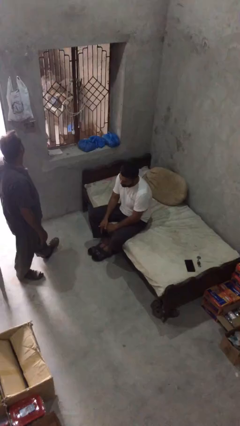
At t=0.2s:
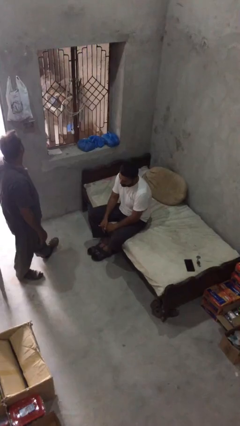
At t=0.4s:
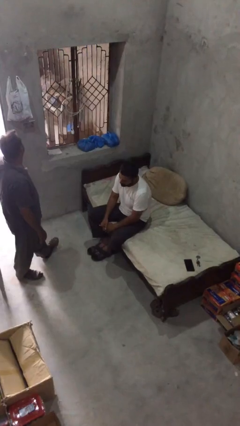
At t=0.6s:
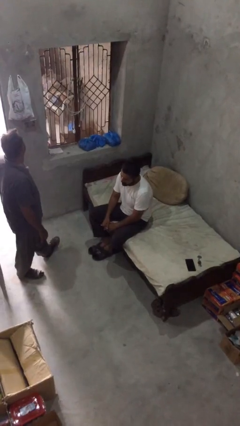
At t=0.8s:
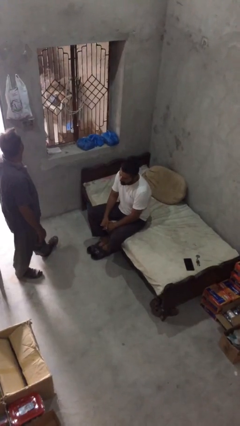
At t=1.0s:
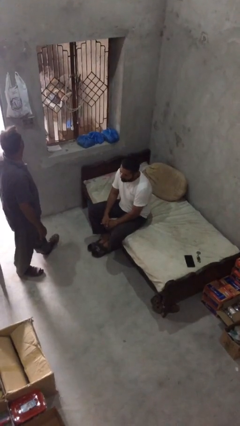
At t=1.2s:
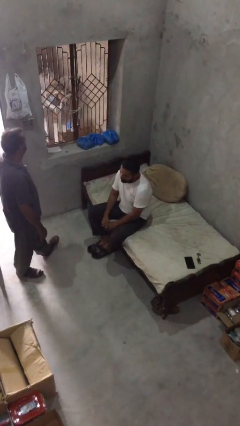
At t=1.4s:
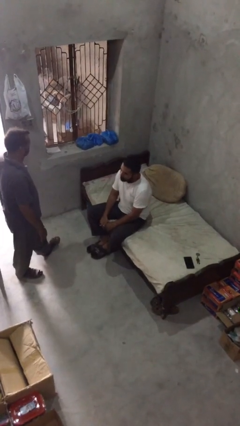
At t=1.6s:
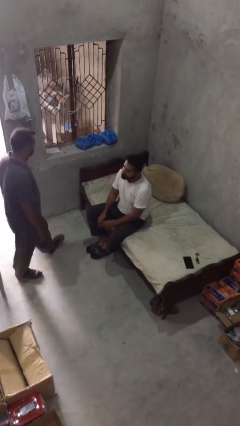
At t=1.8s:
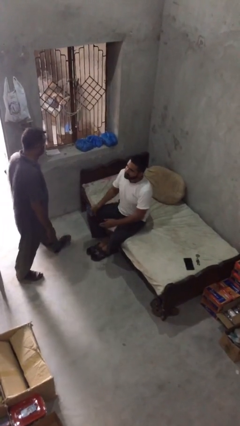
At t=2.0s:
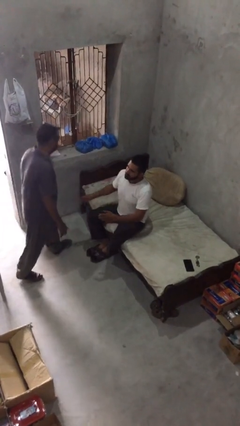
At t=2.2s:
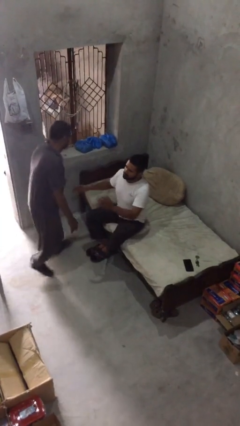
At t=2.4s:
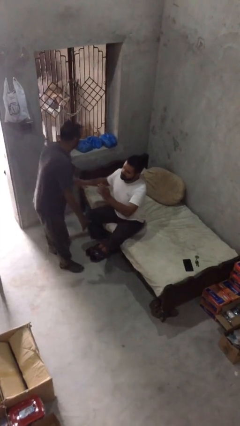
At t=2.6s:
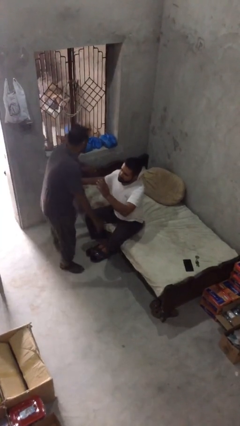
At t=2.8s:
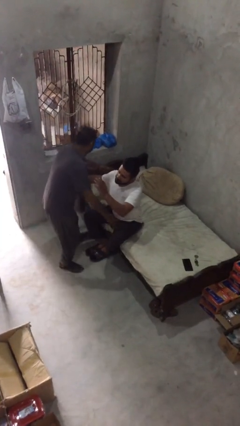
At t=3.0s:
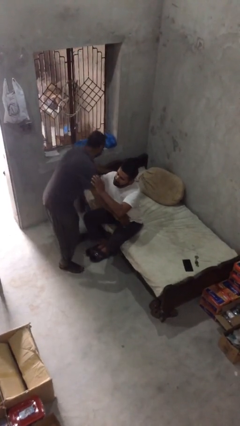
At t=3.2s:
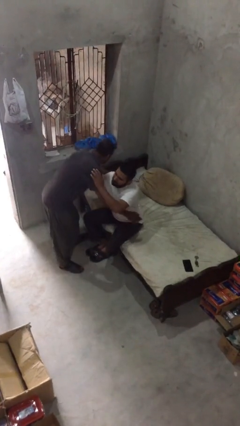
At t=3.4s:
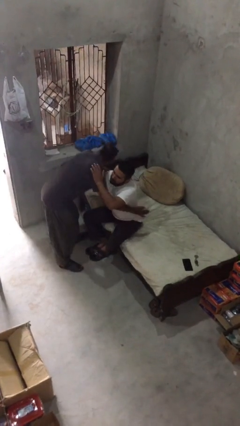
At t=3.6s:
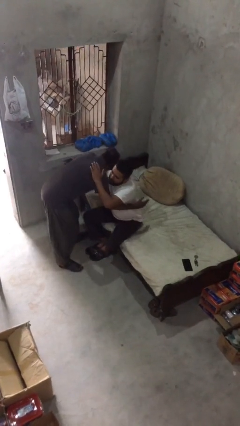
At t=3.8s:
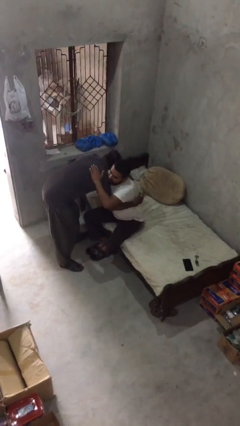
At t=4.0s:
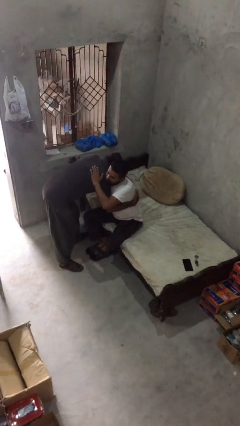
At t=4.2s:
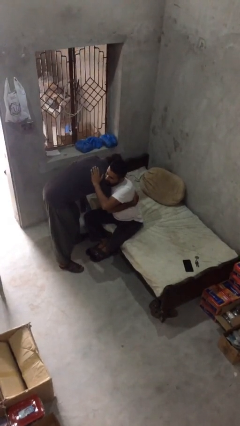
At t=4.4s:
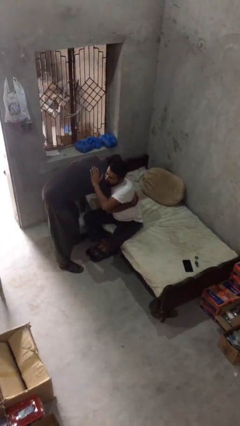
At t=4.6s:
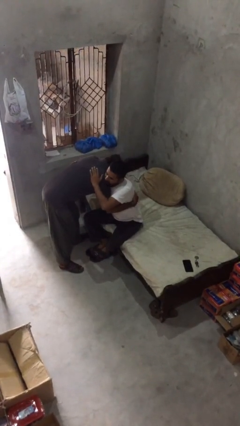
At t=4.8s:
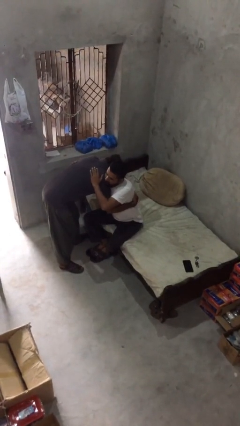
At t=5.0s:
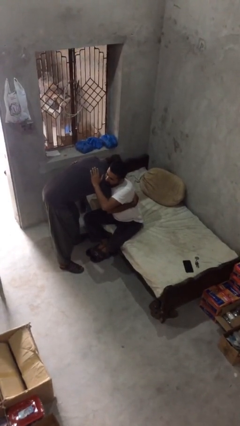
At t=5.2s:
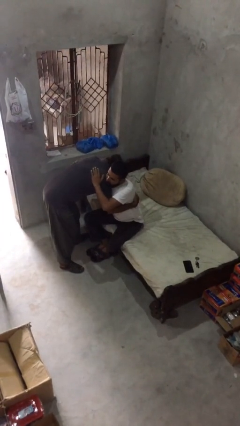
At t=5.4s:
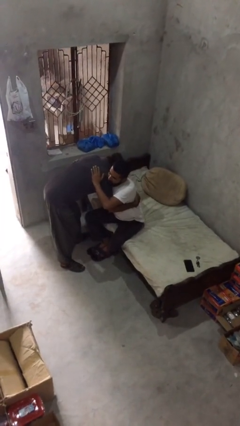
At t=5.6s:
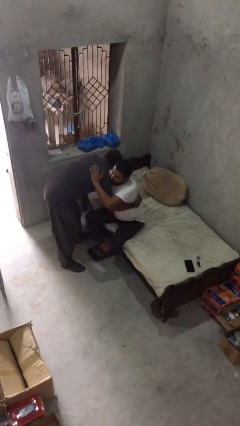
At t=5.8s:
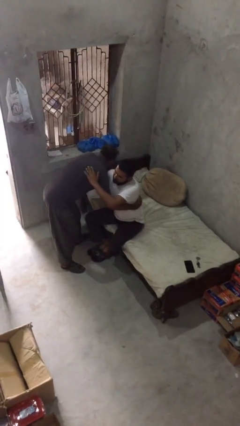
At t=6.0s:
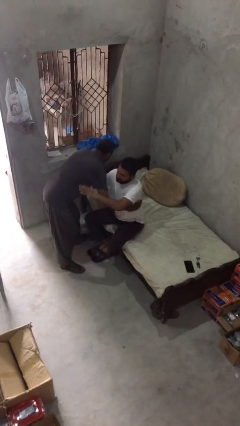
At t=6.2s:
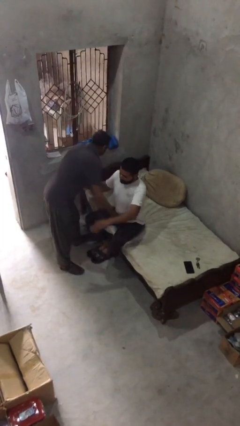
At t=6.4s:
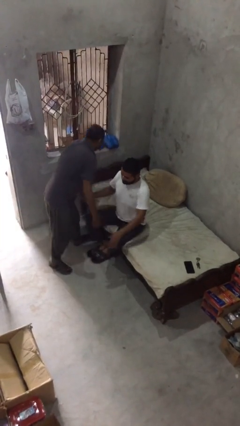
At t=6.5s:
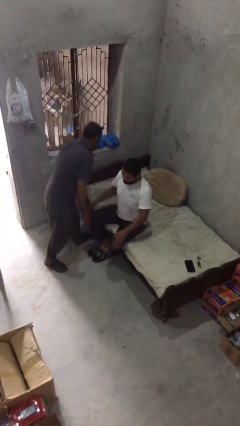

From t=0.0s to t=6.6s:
person embraces person

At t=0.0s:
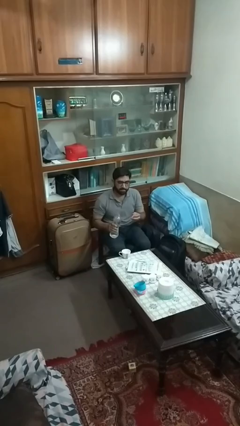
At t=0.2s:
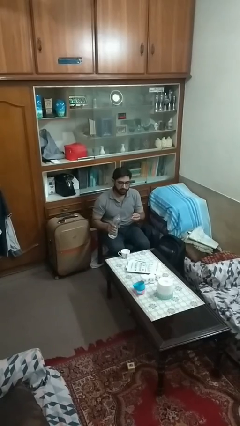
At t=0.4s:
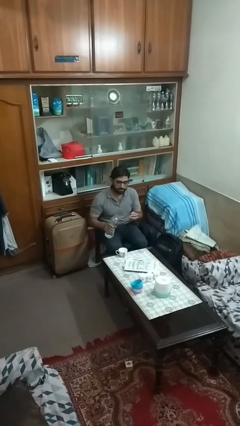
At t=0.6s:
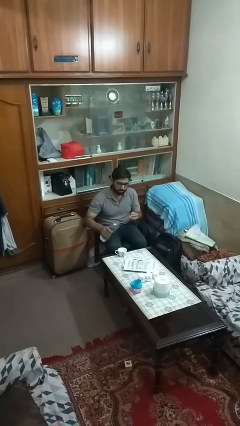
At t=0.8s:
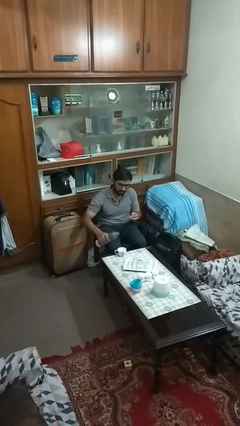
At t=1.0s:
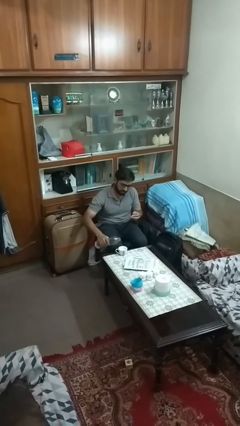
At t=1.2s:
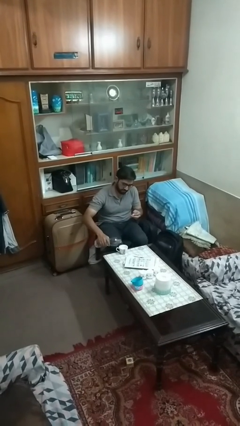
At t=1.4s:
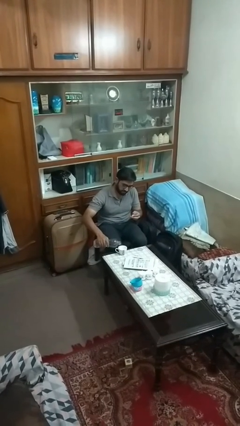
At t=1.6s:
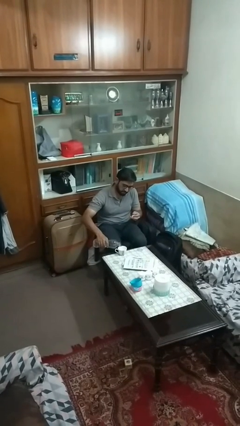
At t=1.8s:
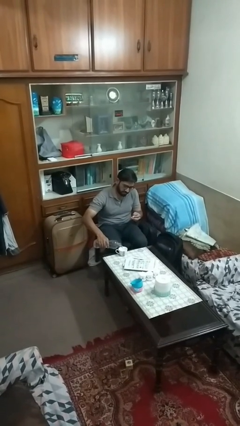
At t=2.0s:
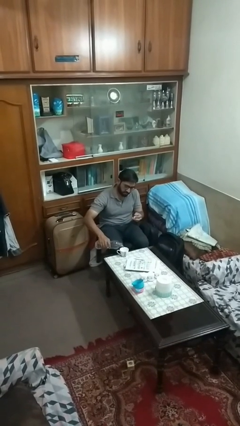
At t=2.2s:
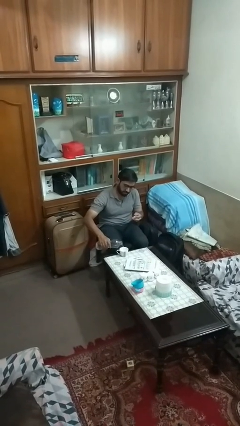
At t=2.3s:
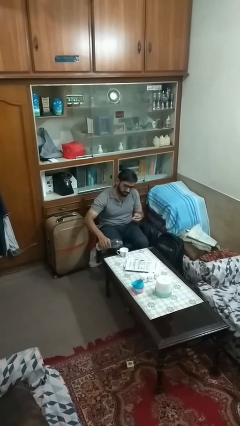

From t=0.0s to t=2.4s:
person pours liquid into cup

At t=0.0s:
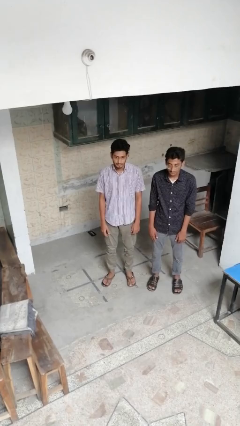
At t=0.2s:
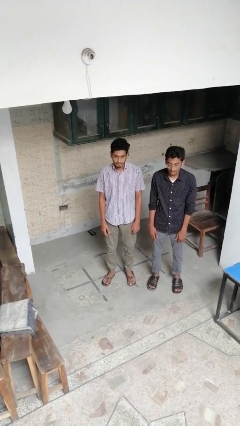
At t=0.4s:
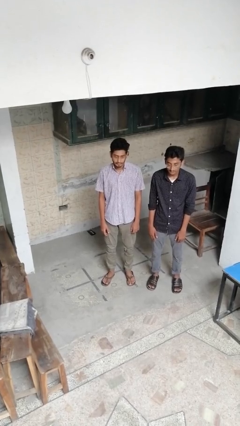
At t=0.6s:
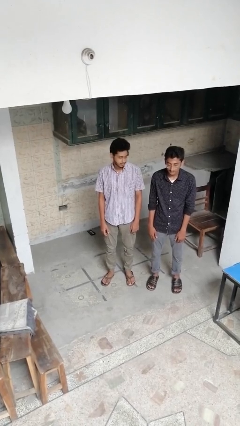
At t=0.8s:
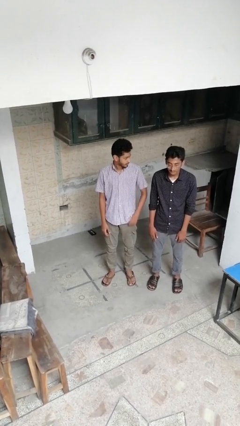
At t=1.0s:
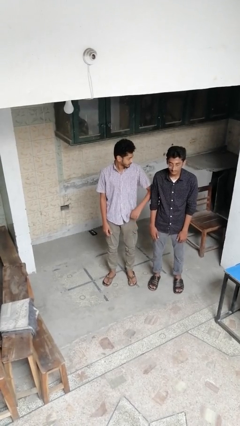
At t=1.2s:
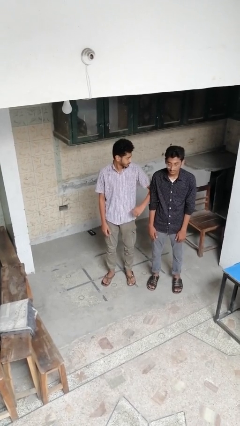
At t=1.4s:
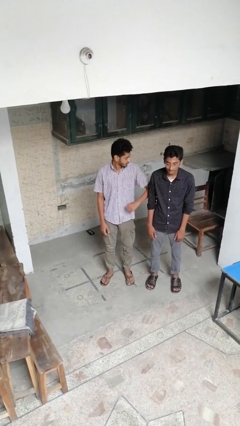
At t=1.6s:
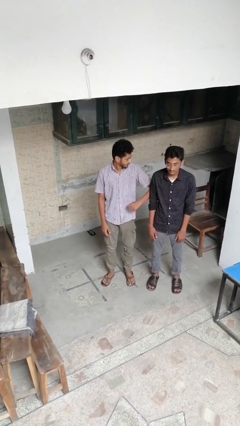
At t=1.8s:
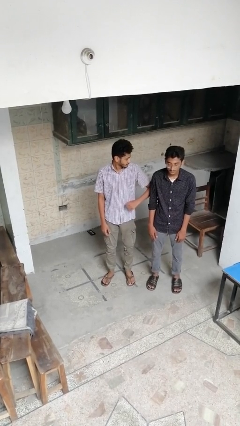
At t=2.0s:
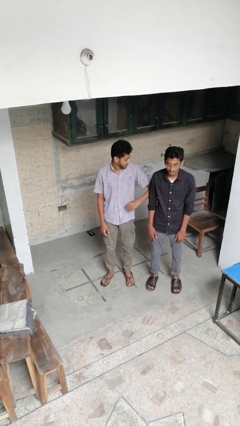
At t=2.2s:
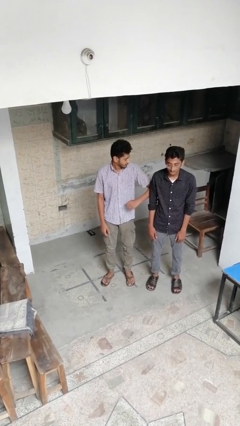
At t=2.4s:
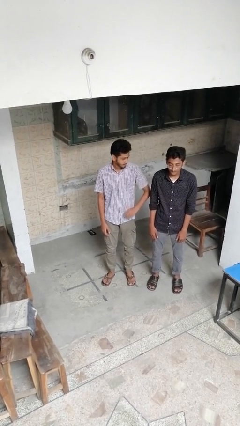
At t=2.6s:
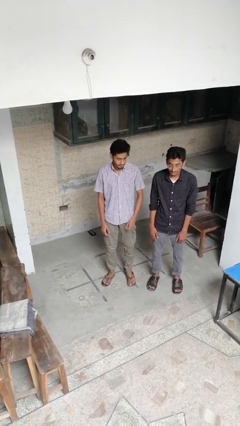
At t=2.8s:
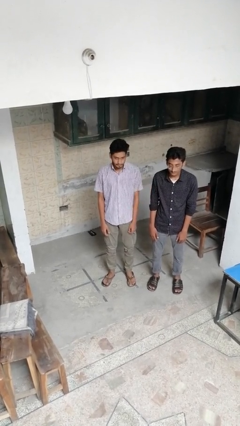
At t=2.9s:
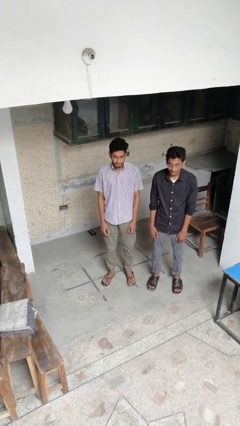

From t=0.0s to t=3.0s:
person nudges person with elbow

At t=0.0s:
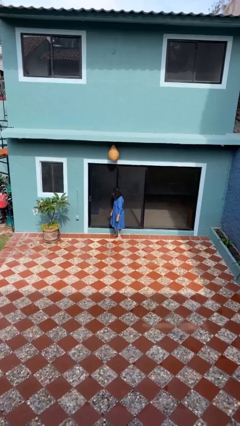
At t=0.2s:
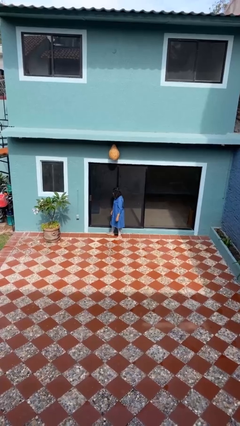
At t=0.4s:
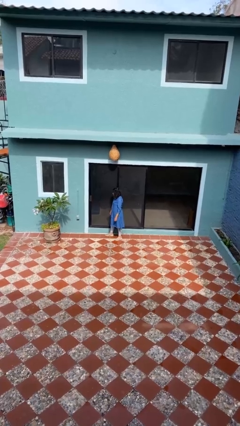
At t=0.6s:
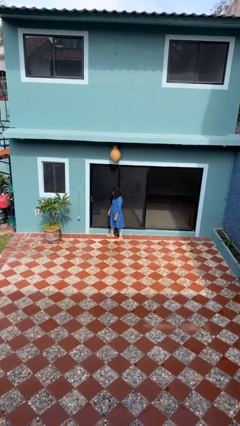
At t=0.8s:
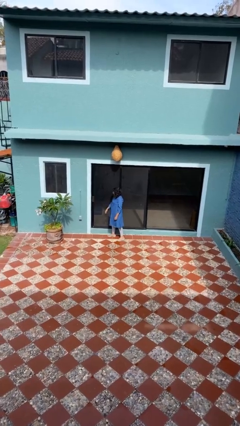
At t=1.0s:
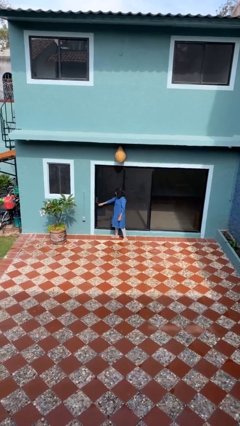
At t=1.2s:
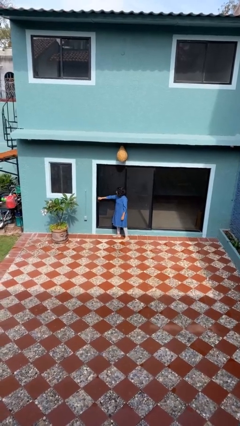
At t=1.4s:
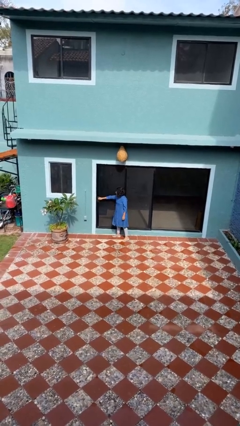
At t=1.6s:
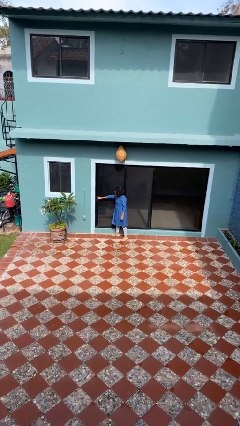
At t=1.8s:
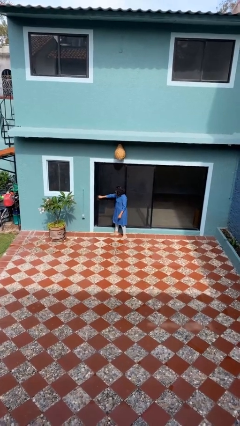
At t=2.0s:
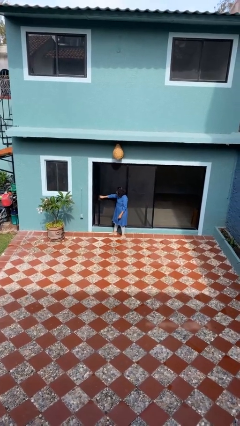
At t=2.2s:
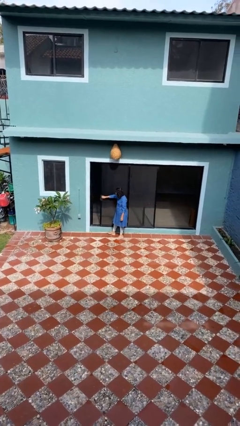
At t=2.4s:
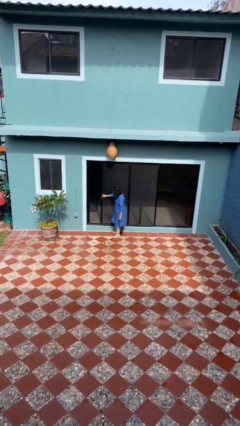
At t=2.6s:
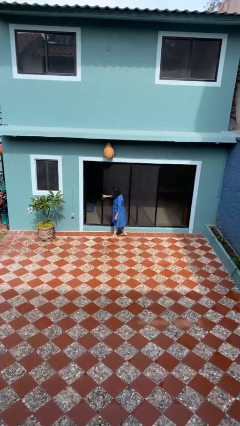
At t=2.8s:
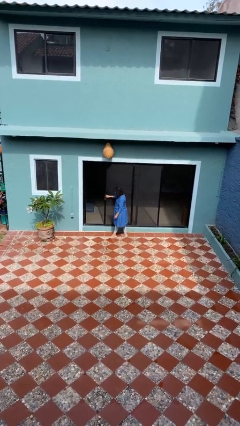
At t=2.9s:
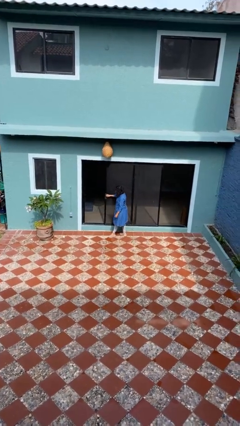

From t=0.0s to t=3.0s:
person opens sliding door

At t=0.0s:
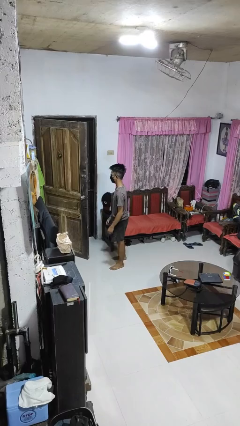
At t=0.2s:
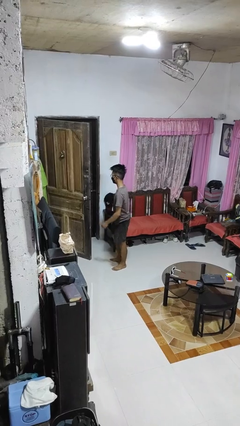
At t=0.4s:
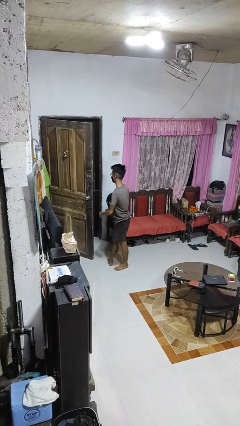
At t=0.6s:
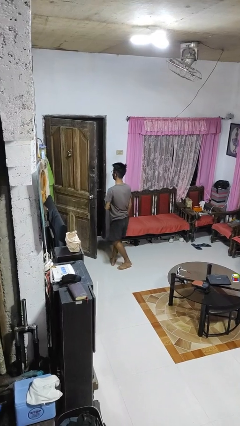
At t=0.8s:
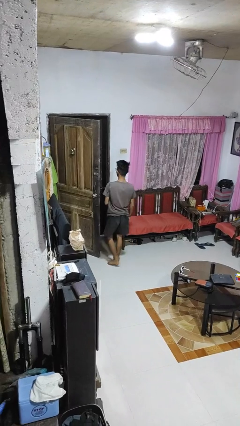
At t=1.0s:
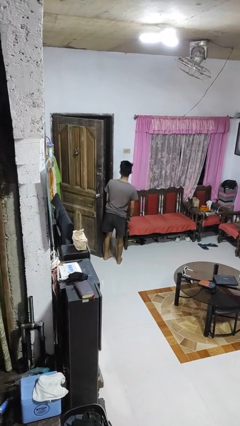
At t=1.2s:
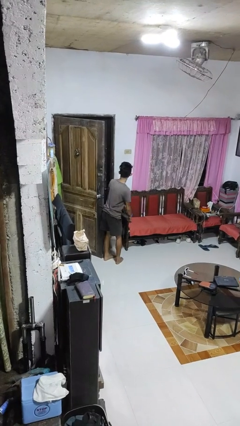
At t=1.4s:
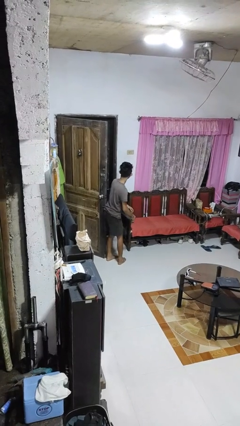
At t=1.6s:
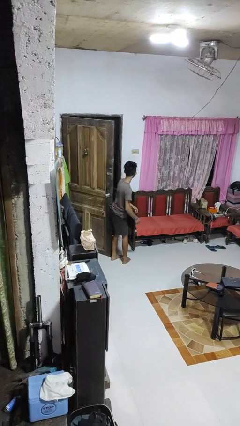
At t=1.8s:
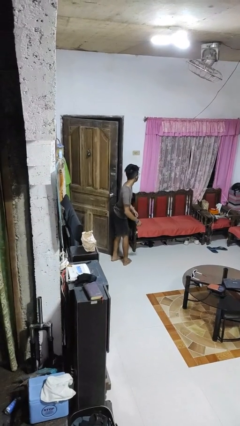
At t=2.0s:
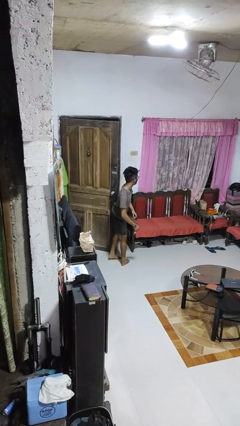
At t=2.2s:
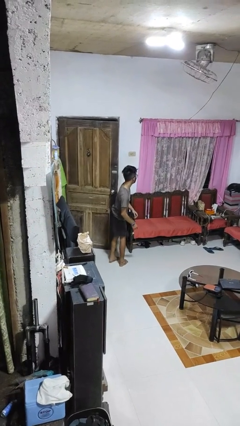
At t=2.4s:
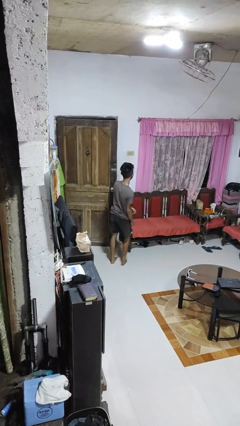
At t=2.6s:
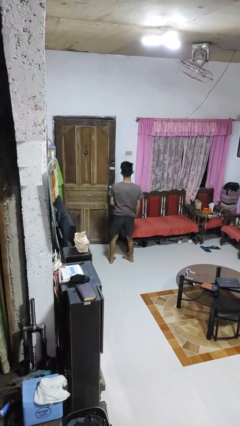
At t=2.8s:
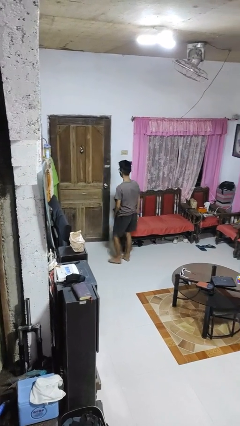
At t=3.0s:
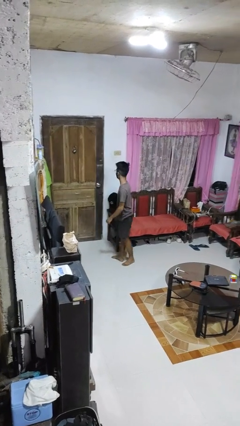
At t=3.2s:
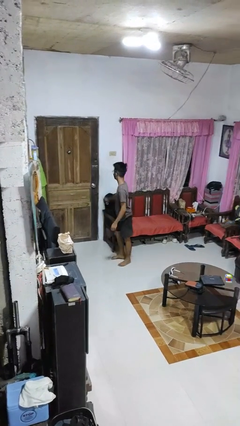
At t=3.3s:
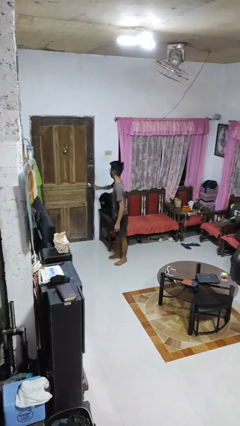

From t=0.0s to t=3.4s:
person closes door with hip
